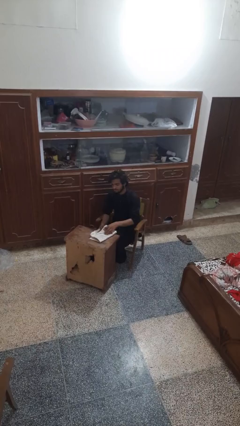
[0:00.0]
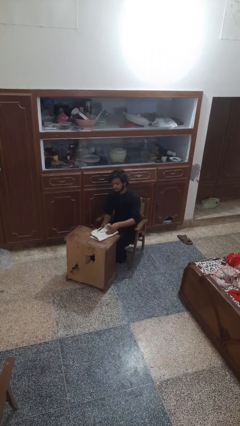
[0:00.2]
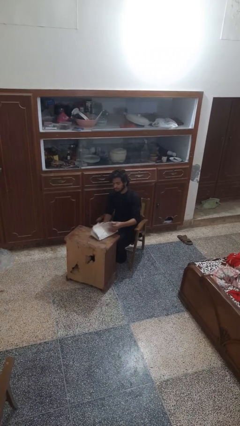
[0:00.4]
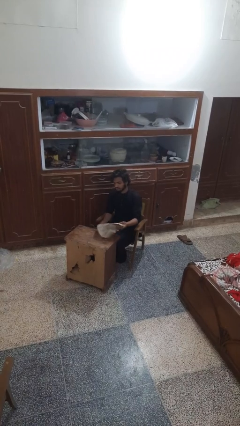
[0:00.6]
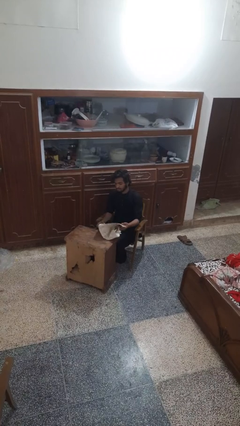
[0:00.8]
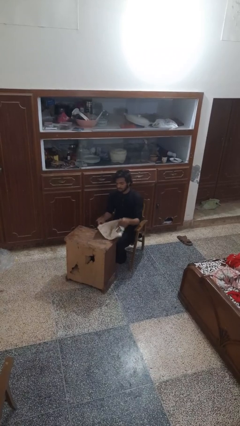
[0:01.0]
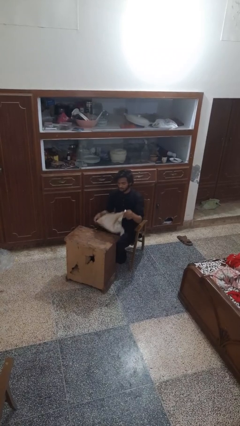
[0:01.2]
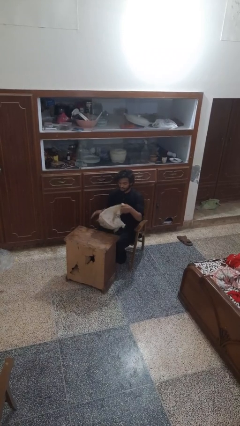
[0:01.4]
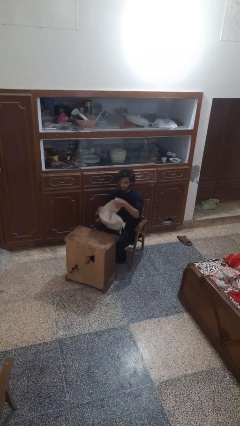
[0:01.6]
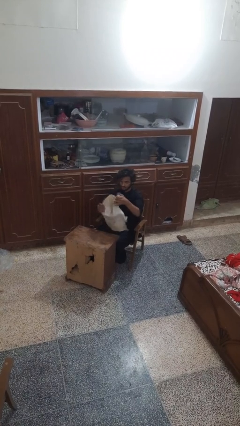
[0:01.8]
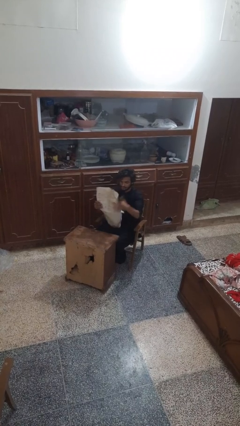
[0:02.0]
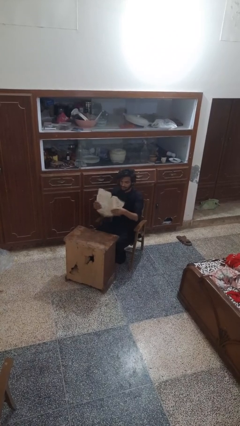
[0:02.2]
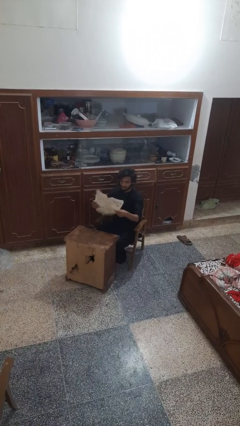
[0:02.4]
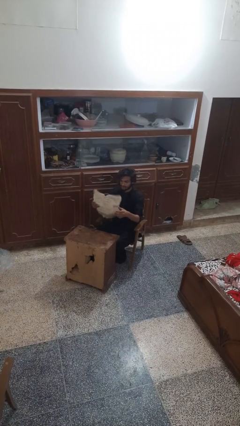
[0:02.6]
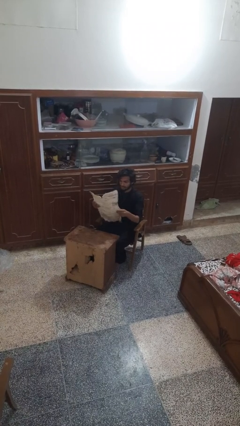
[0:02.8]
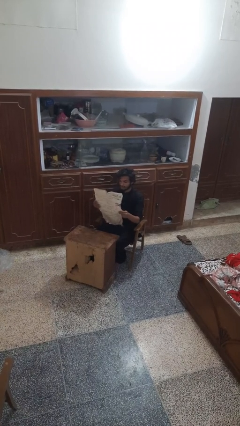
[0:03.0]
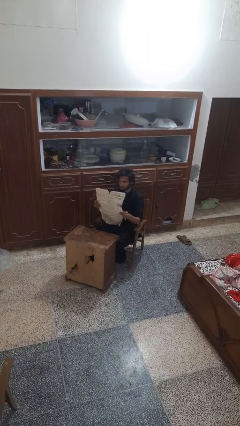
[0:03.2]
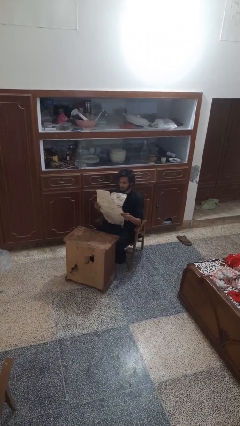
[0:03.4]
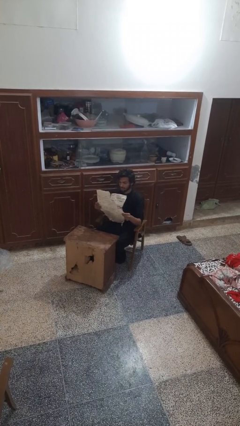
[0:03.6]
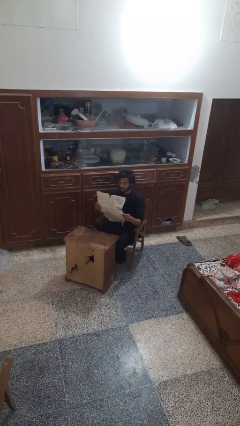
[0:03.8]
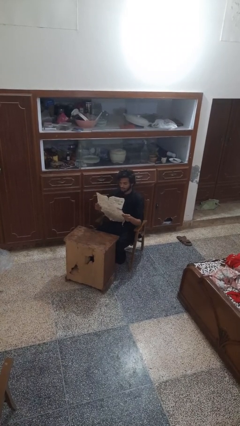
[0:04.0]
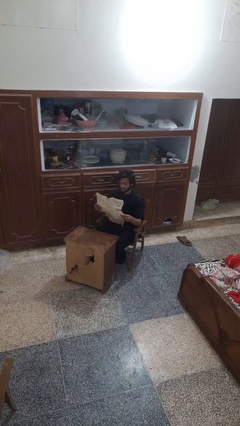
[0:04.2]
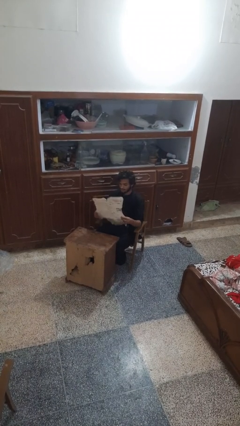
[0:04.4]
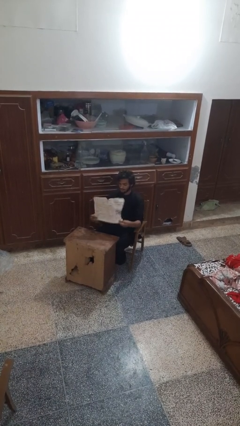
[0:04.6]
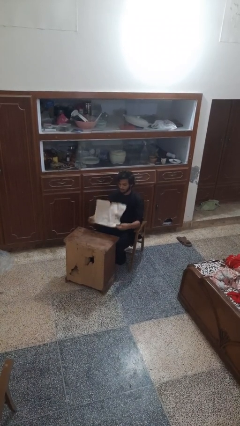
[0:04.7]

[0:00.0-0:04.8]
person reads newspaper

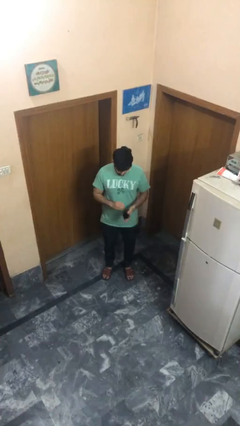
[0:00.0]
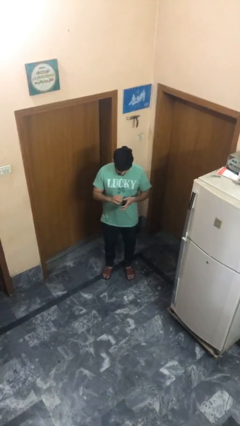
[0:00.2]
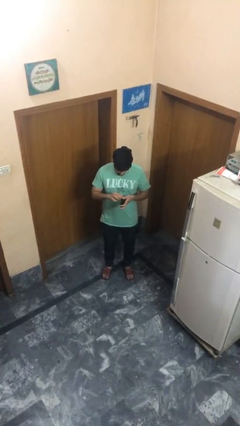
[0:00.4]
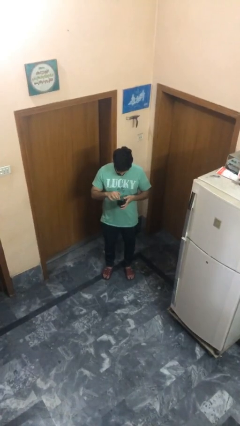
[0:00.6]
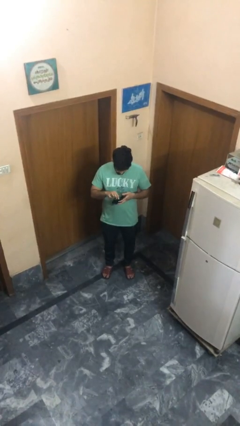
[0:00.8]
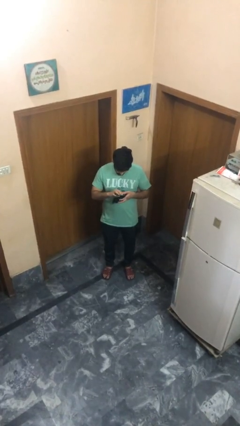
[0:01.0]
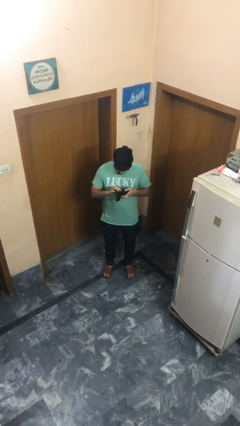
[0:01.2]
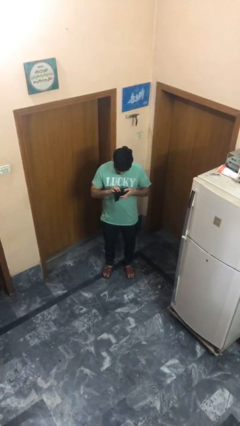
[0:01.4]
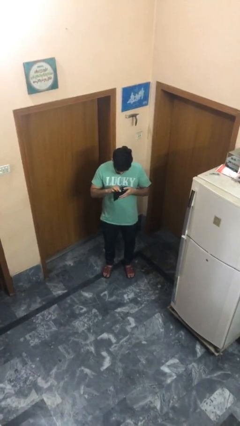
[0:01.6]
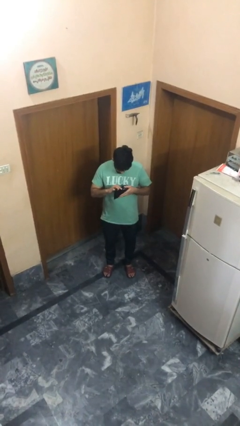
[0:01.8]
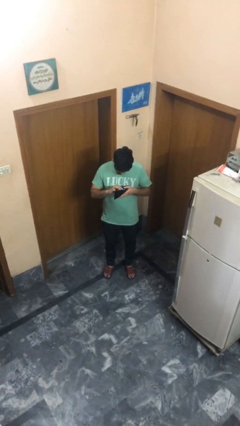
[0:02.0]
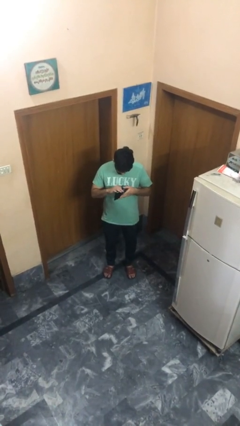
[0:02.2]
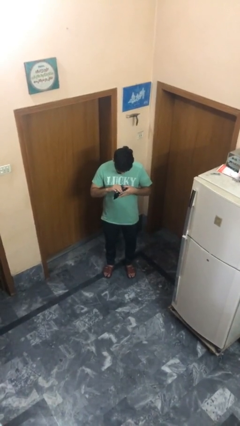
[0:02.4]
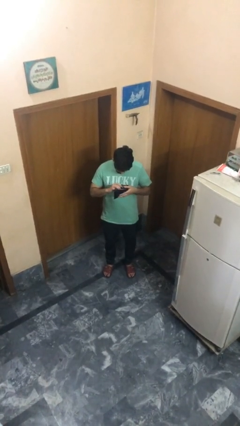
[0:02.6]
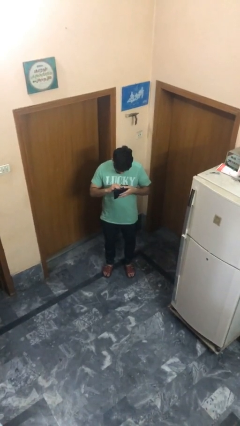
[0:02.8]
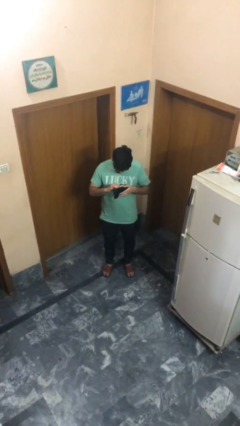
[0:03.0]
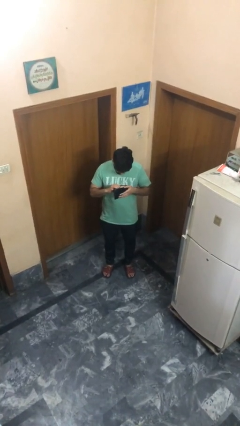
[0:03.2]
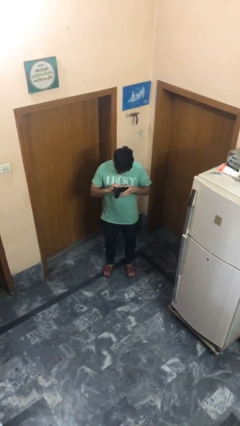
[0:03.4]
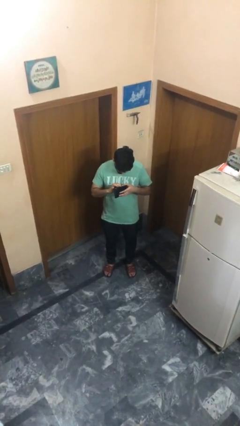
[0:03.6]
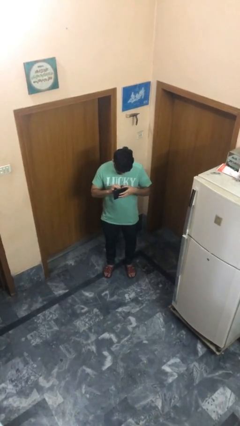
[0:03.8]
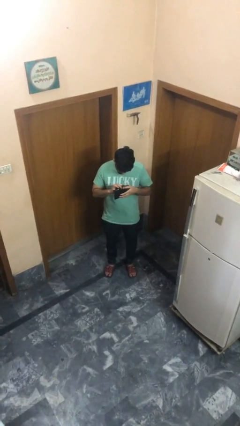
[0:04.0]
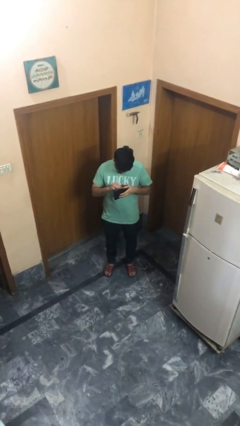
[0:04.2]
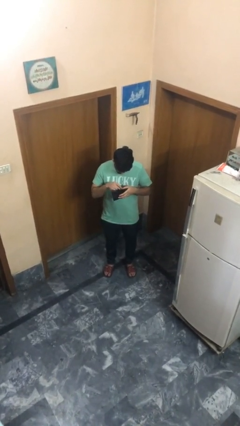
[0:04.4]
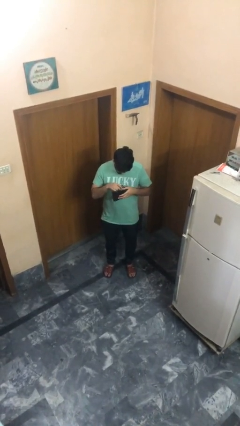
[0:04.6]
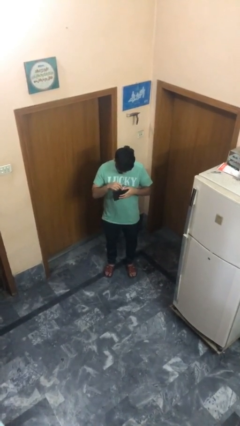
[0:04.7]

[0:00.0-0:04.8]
person searches in purse

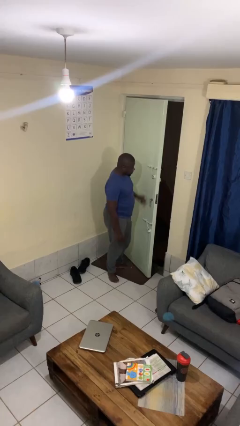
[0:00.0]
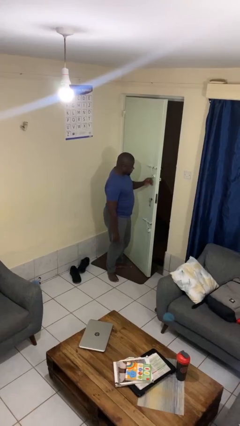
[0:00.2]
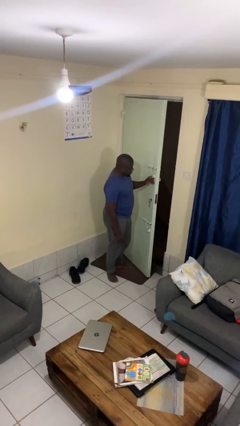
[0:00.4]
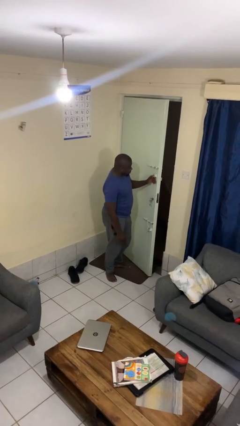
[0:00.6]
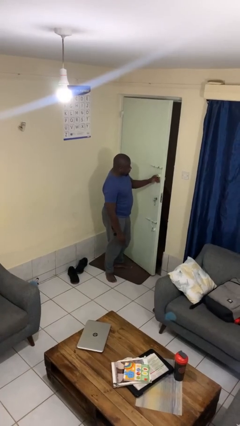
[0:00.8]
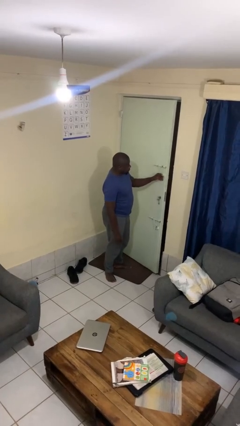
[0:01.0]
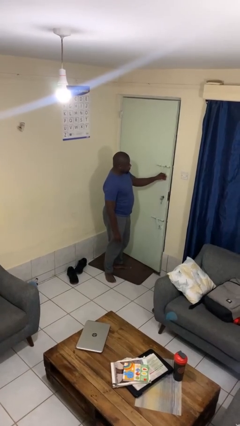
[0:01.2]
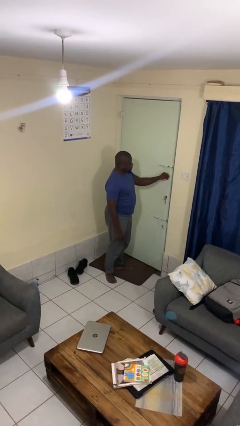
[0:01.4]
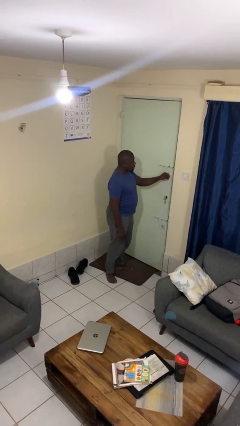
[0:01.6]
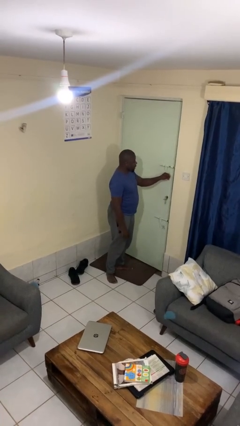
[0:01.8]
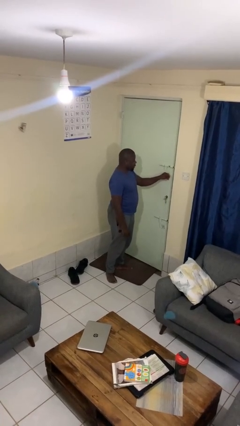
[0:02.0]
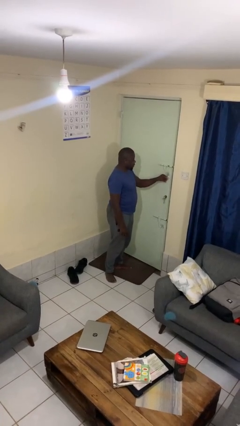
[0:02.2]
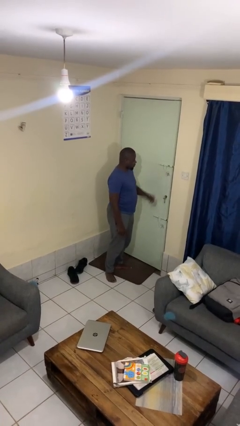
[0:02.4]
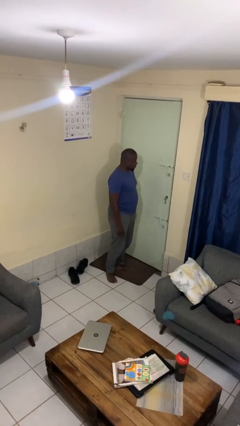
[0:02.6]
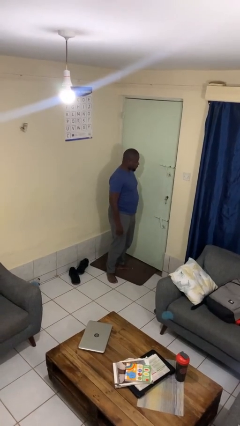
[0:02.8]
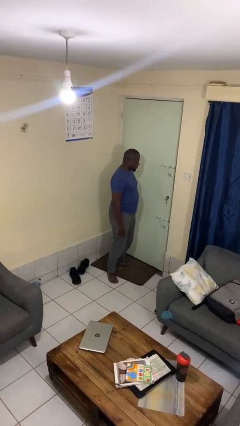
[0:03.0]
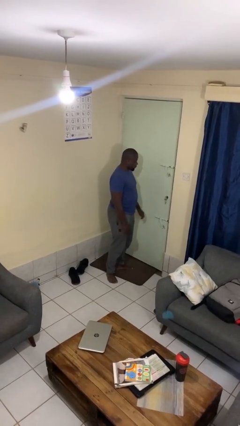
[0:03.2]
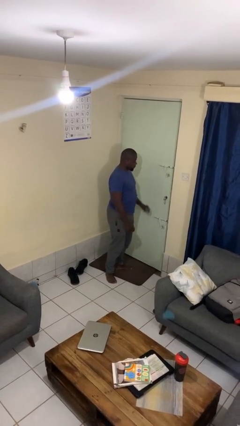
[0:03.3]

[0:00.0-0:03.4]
person closes facility door

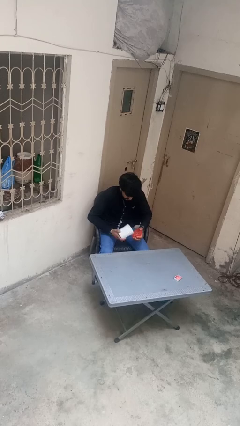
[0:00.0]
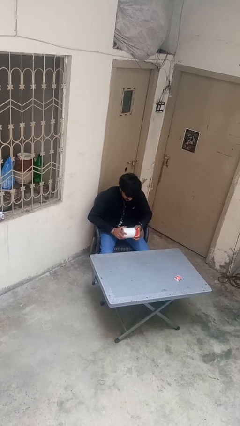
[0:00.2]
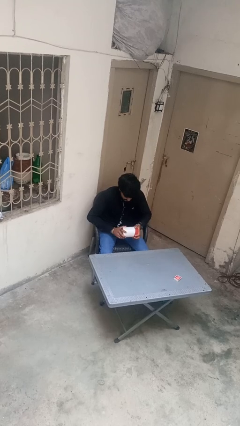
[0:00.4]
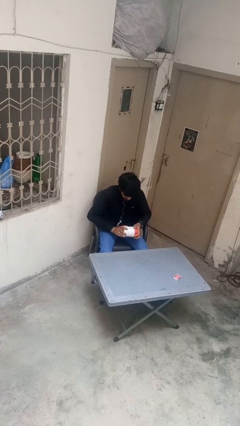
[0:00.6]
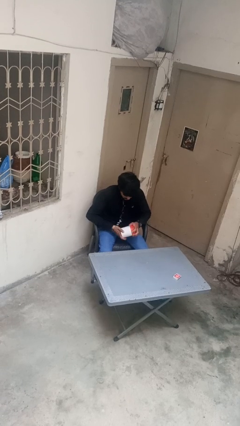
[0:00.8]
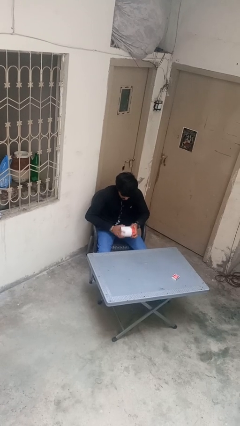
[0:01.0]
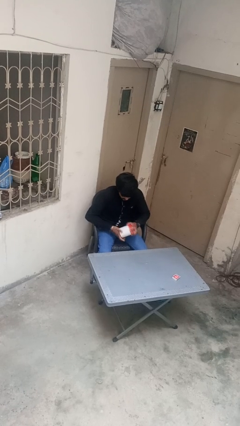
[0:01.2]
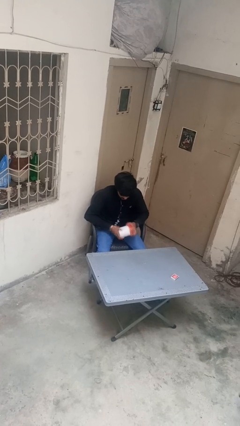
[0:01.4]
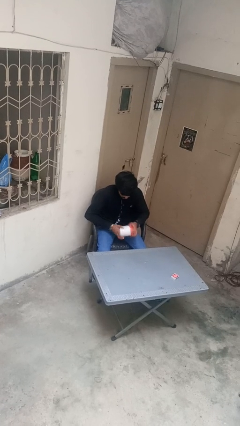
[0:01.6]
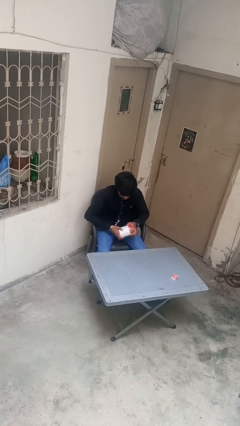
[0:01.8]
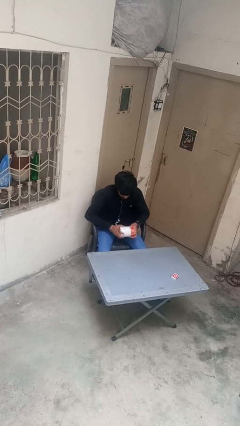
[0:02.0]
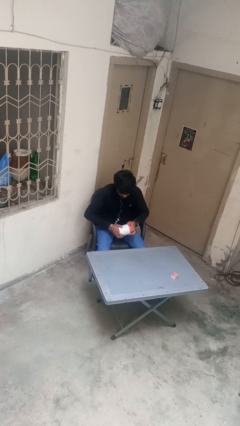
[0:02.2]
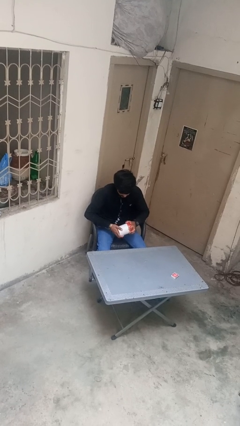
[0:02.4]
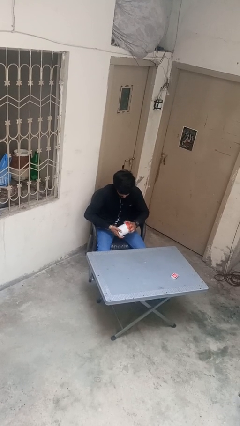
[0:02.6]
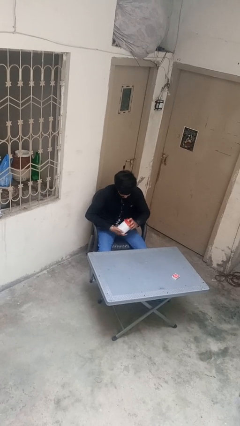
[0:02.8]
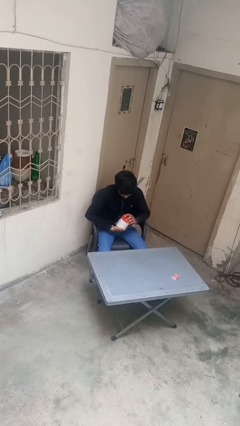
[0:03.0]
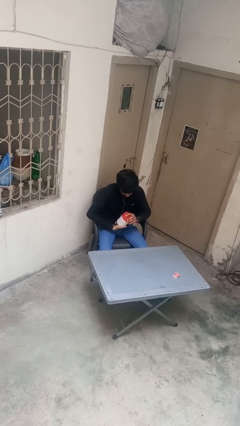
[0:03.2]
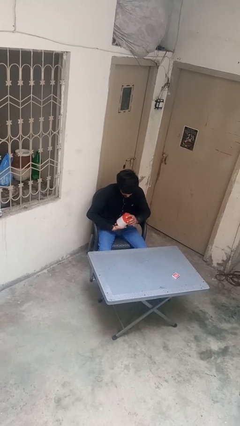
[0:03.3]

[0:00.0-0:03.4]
person closes jar

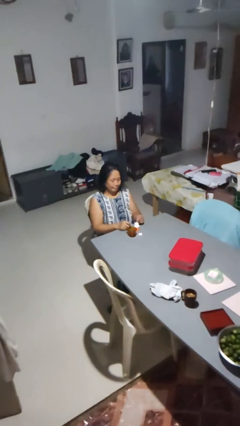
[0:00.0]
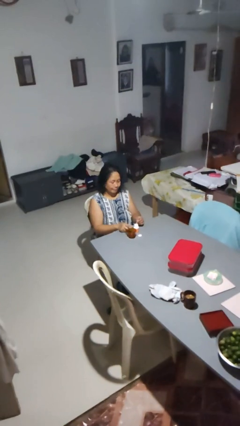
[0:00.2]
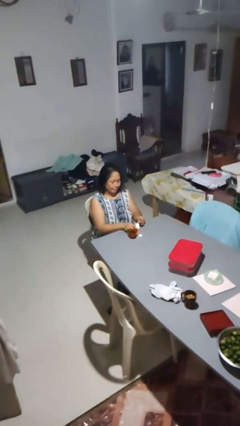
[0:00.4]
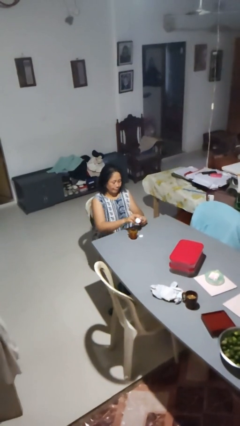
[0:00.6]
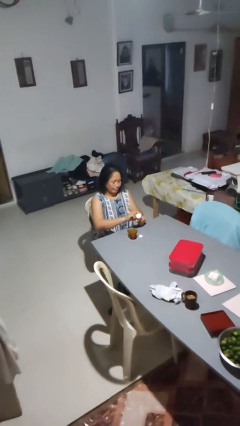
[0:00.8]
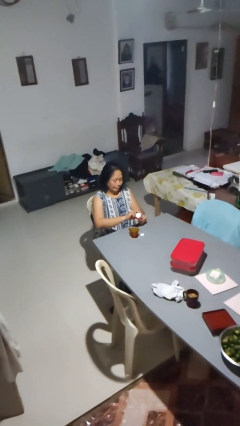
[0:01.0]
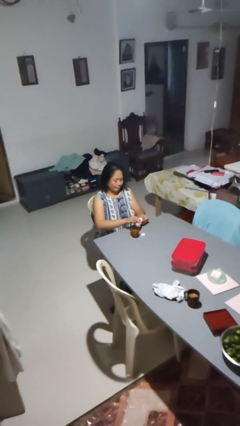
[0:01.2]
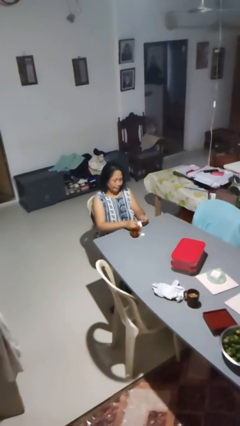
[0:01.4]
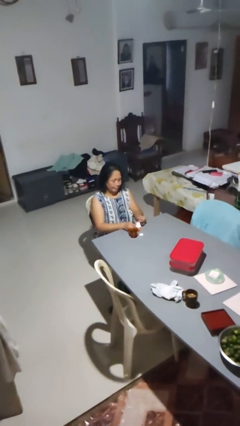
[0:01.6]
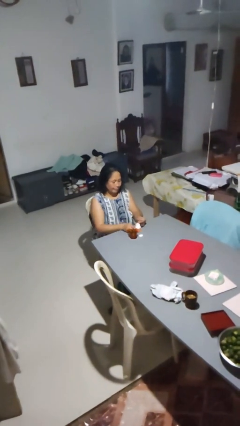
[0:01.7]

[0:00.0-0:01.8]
person takes medicine pills
